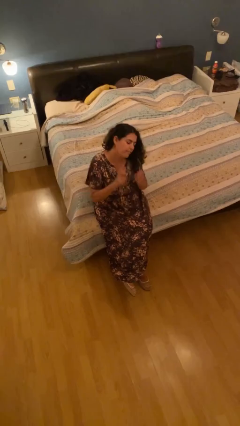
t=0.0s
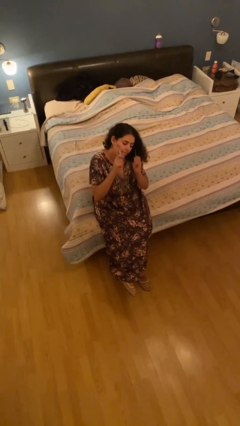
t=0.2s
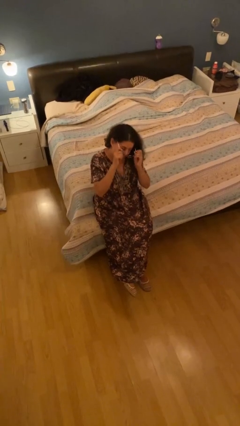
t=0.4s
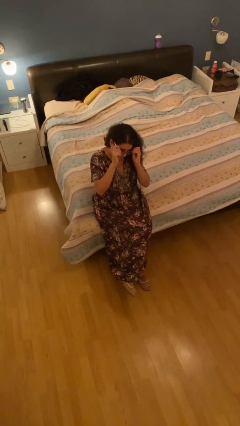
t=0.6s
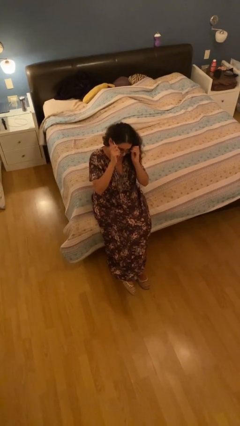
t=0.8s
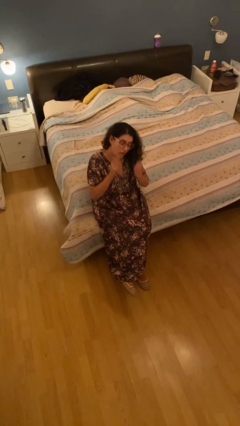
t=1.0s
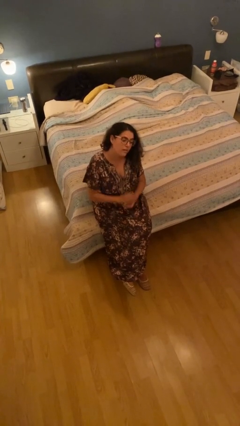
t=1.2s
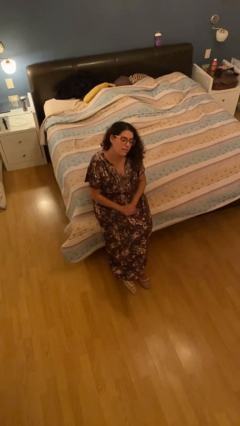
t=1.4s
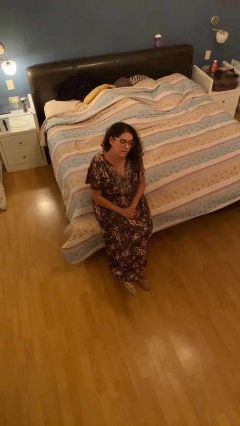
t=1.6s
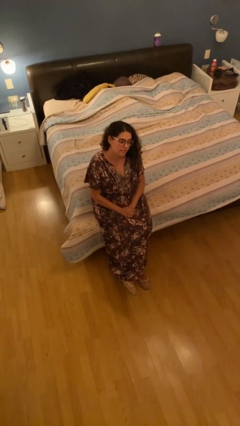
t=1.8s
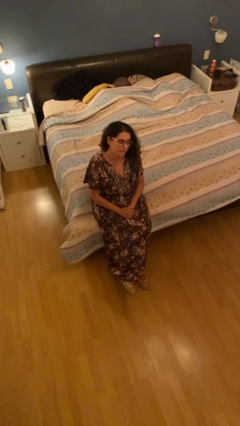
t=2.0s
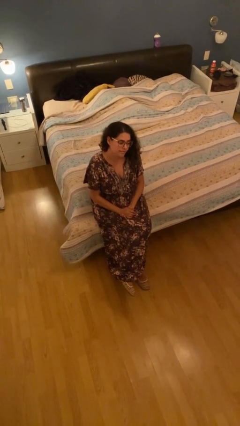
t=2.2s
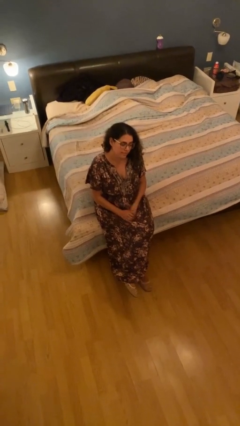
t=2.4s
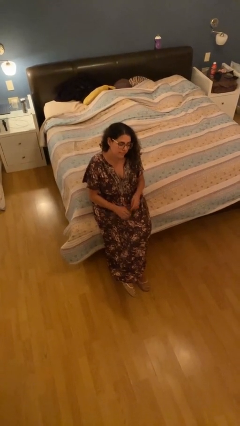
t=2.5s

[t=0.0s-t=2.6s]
person puts on glasses

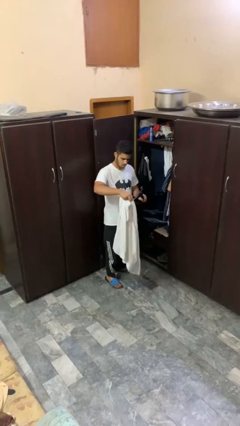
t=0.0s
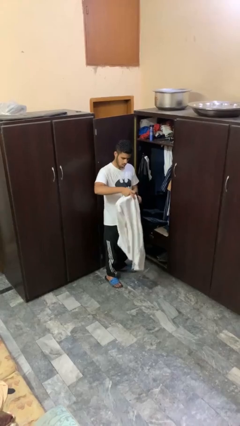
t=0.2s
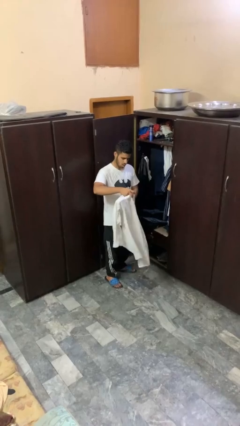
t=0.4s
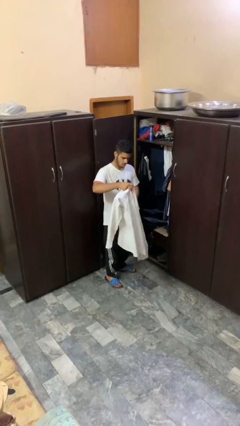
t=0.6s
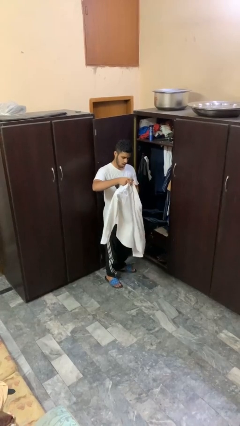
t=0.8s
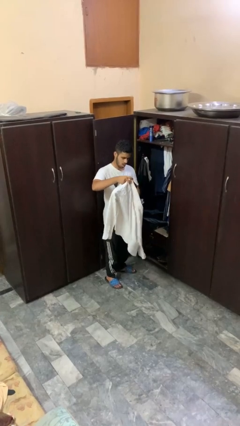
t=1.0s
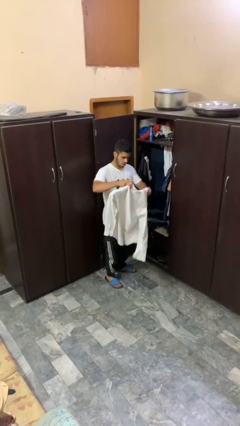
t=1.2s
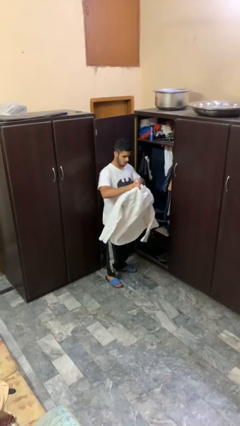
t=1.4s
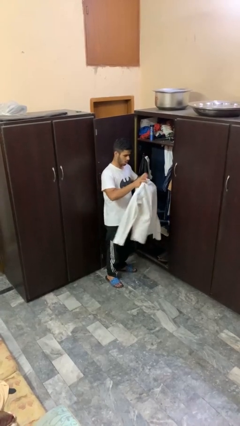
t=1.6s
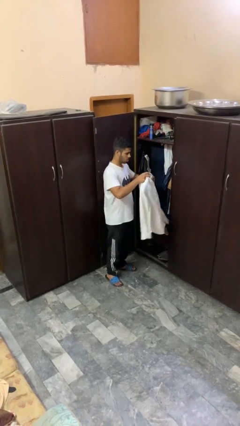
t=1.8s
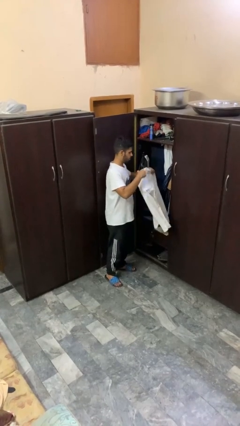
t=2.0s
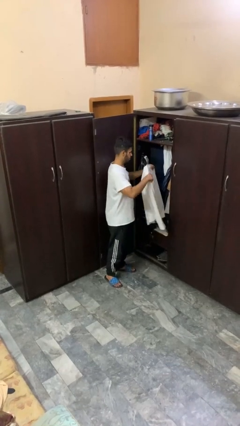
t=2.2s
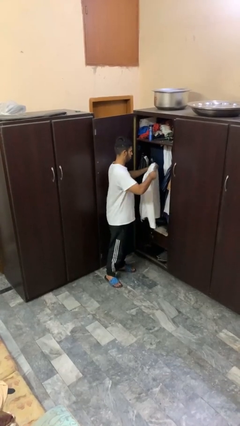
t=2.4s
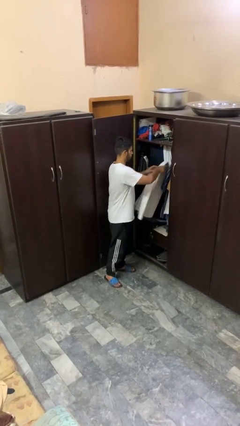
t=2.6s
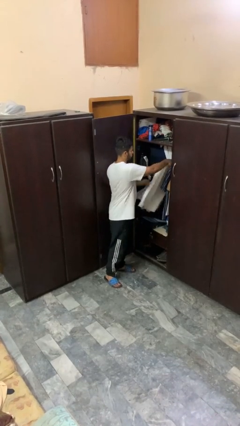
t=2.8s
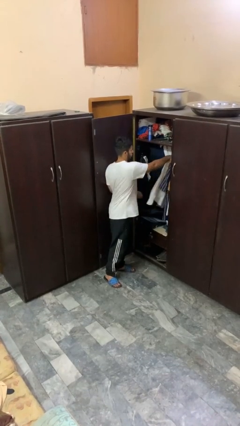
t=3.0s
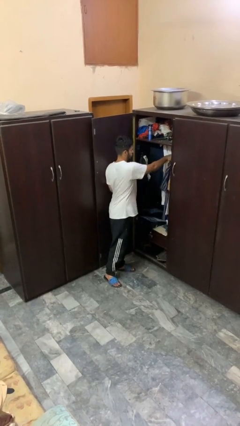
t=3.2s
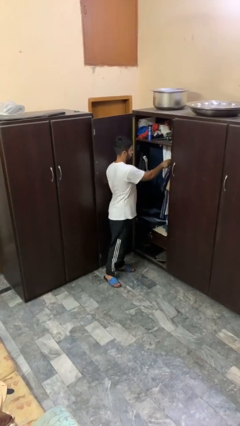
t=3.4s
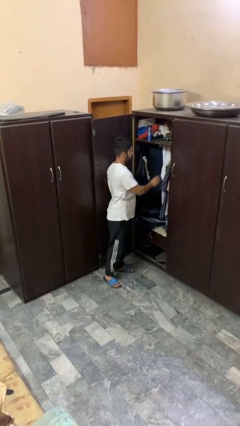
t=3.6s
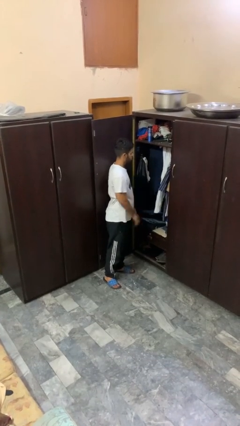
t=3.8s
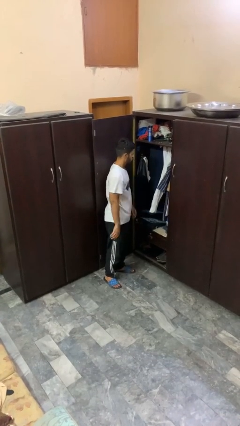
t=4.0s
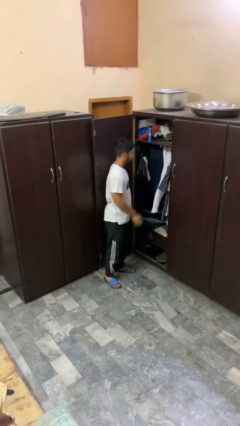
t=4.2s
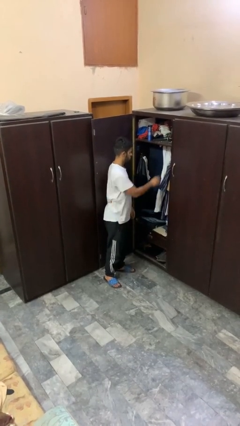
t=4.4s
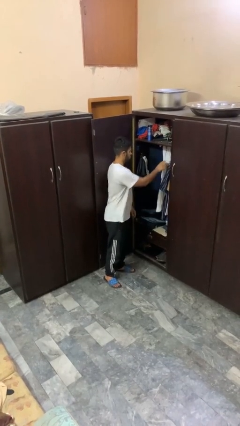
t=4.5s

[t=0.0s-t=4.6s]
person puts clothes into closet

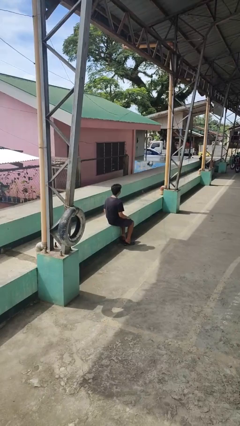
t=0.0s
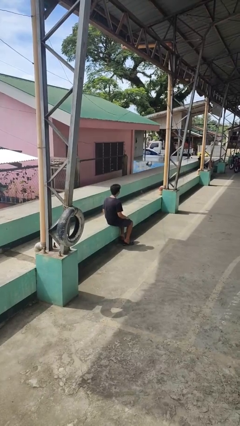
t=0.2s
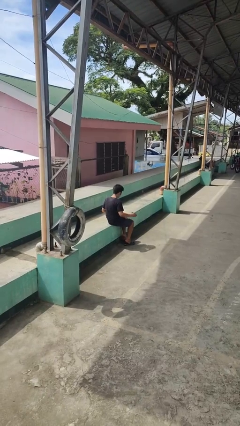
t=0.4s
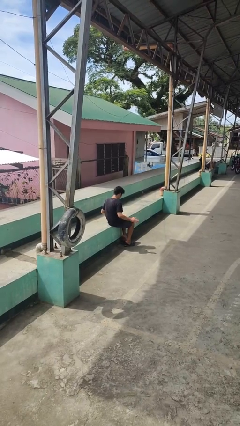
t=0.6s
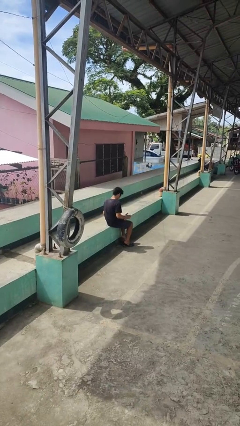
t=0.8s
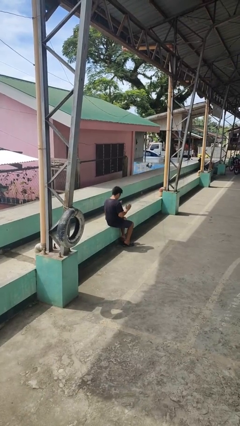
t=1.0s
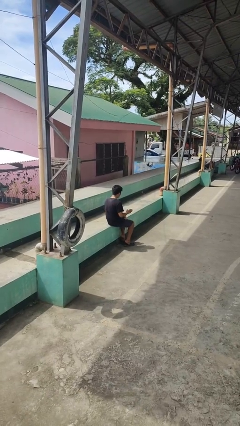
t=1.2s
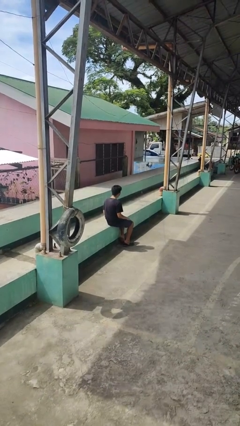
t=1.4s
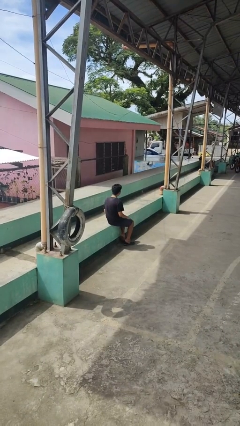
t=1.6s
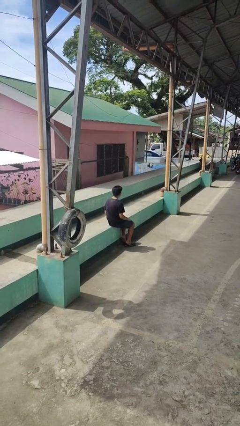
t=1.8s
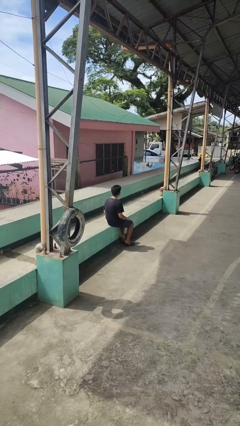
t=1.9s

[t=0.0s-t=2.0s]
person slaps hands on thighs

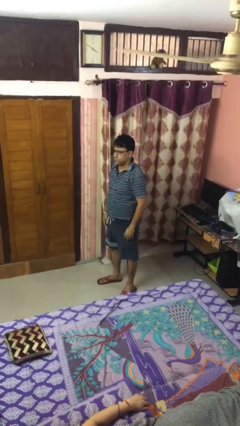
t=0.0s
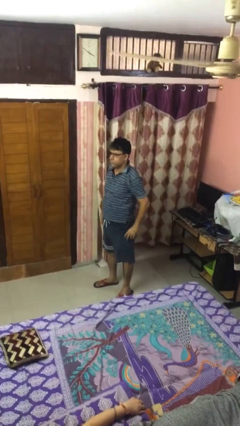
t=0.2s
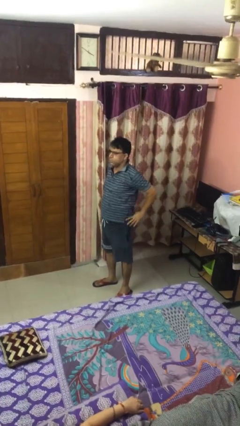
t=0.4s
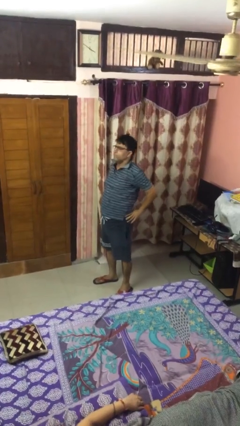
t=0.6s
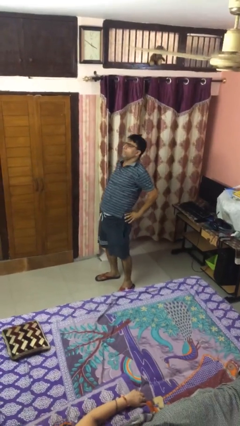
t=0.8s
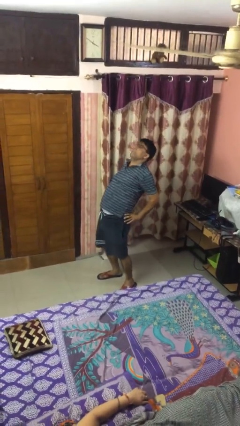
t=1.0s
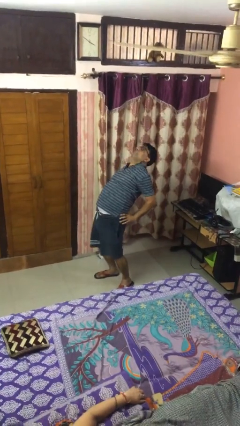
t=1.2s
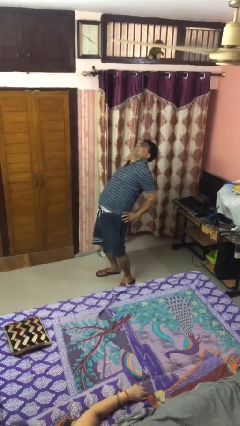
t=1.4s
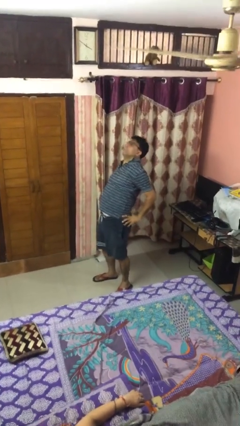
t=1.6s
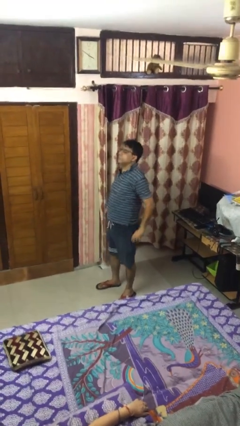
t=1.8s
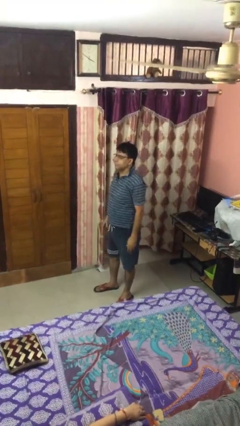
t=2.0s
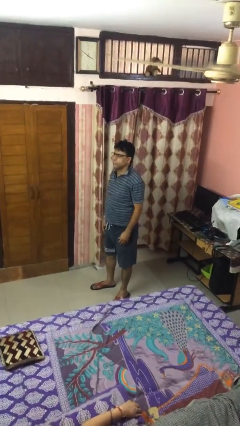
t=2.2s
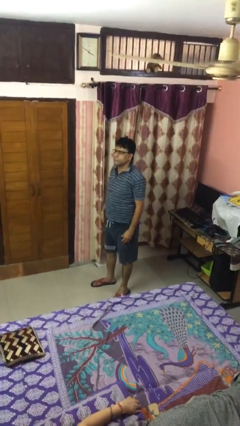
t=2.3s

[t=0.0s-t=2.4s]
person stretches back

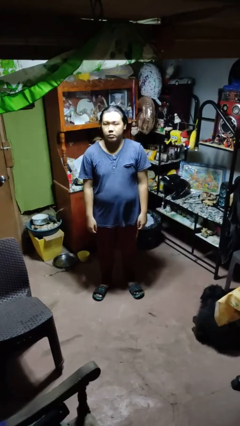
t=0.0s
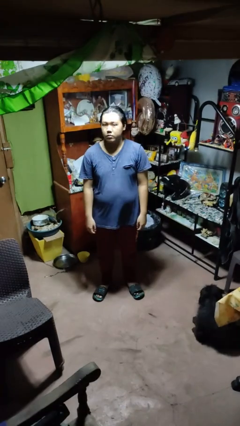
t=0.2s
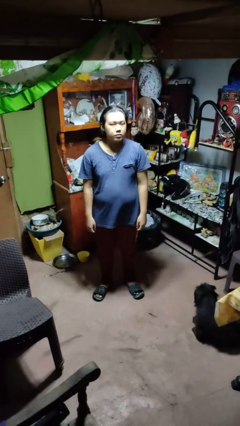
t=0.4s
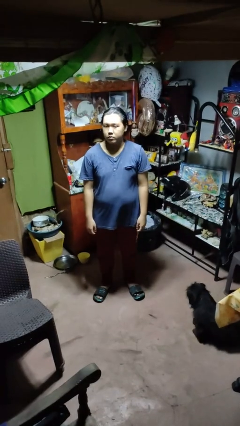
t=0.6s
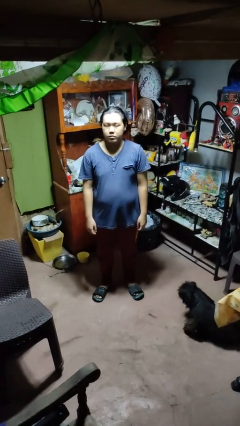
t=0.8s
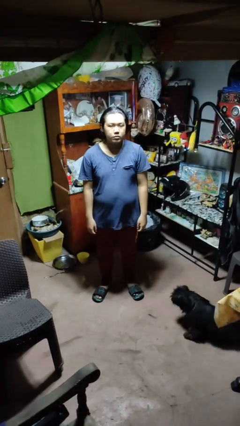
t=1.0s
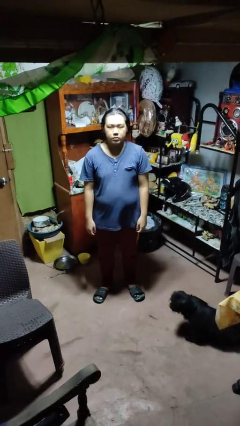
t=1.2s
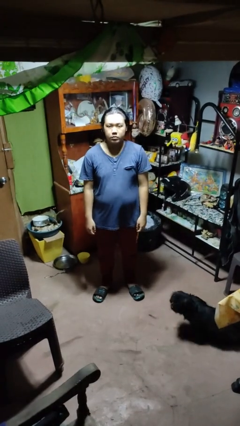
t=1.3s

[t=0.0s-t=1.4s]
person shakes head

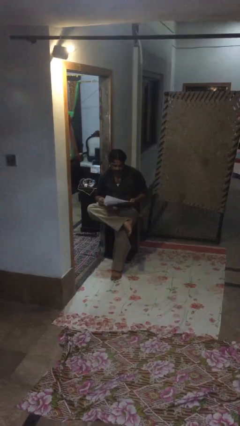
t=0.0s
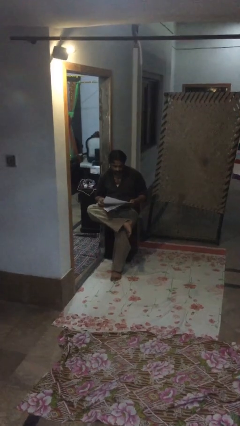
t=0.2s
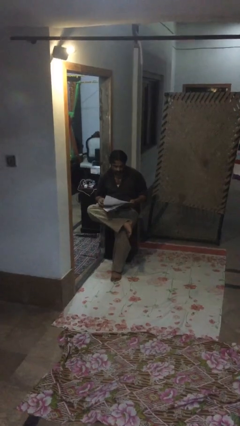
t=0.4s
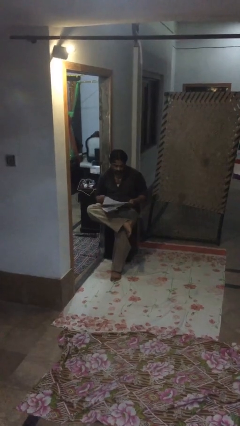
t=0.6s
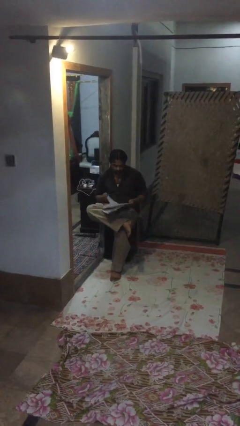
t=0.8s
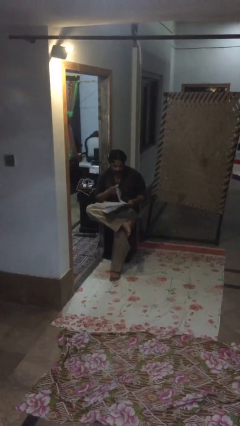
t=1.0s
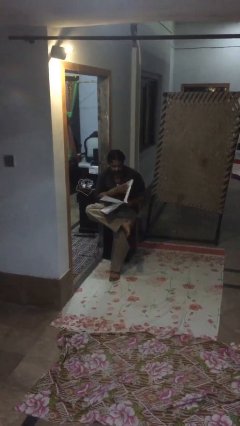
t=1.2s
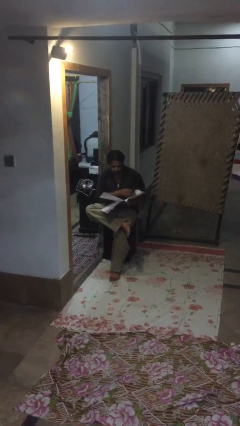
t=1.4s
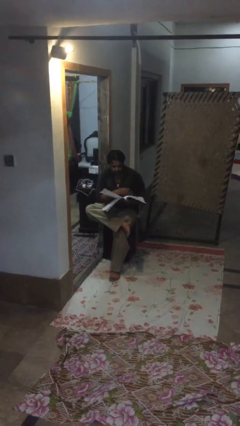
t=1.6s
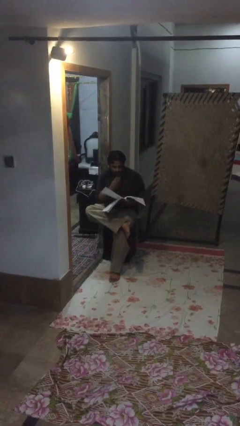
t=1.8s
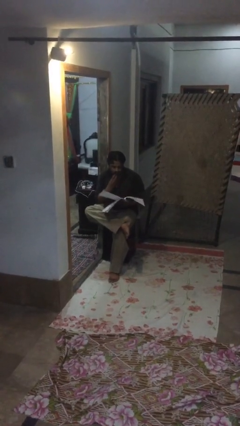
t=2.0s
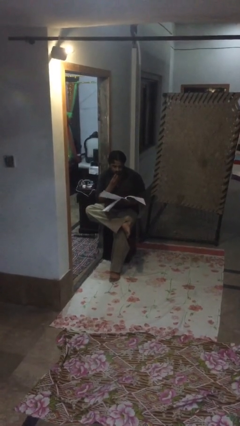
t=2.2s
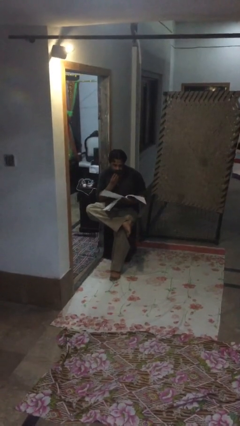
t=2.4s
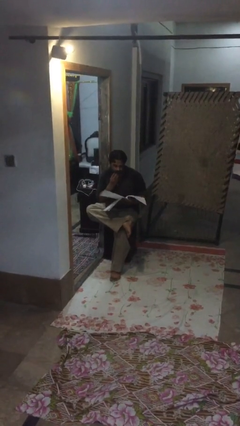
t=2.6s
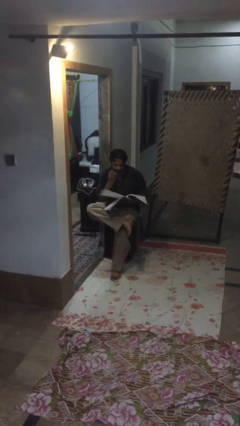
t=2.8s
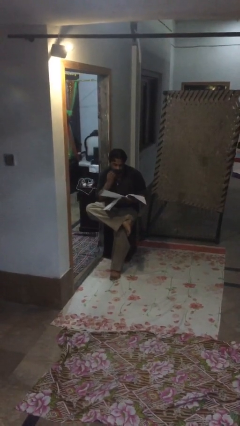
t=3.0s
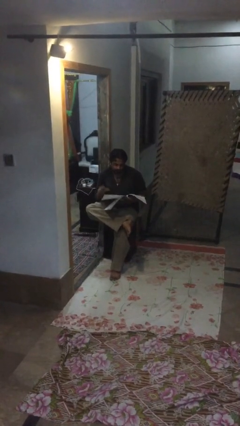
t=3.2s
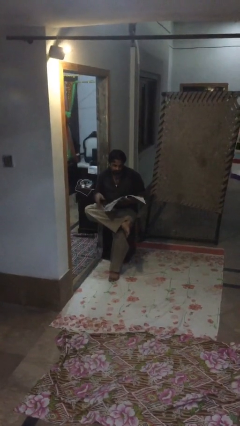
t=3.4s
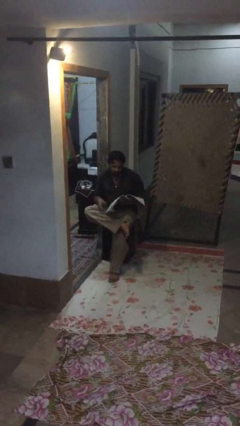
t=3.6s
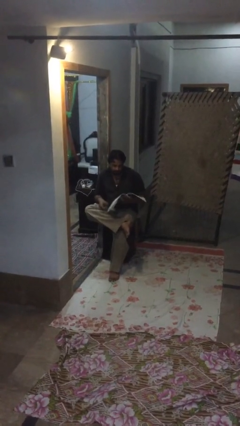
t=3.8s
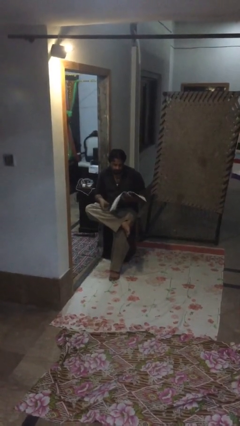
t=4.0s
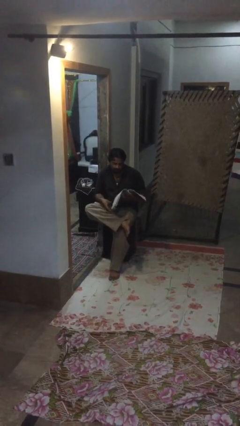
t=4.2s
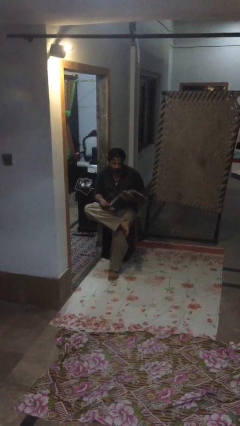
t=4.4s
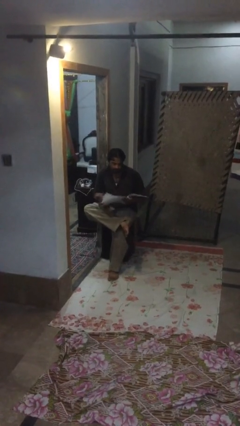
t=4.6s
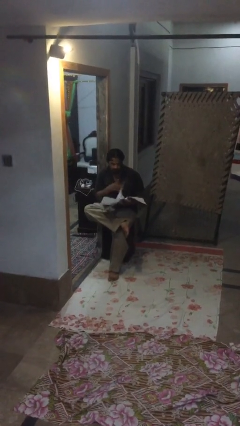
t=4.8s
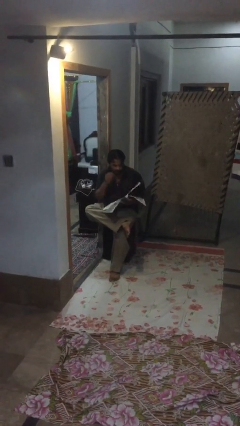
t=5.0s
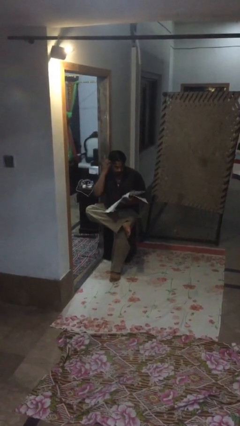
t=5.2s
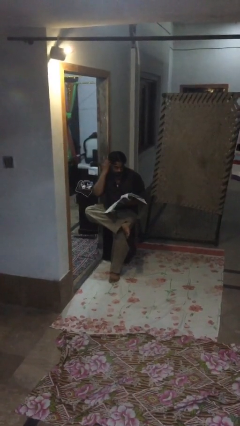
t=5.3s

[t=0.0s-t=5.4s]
person reads document
